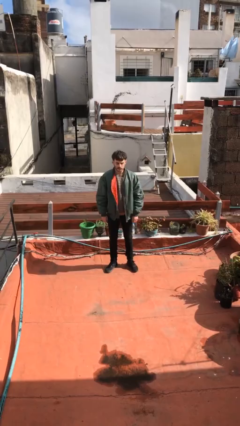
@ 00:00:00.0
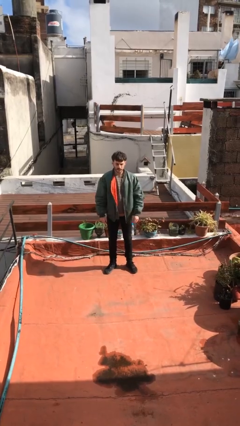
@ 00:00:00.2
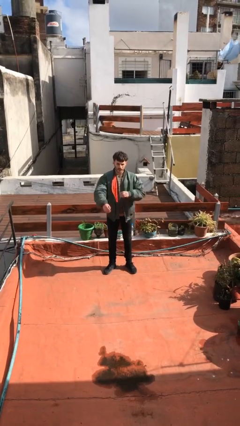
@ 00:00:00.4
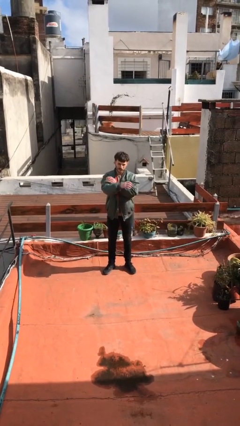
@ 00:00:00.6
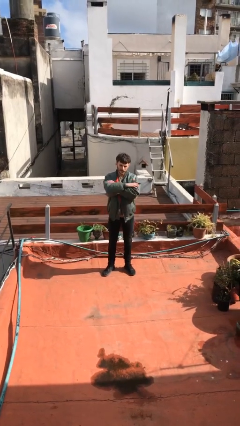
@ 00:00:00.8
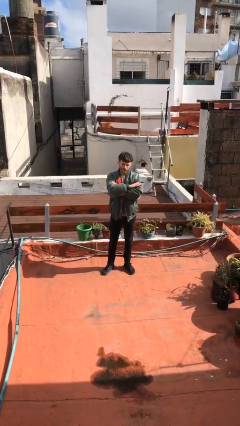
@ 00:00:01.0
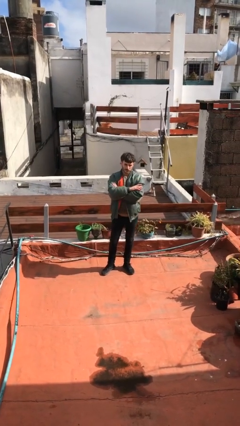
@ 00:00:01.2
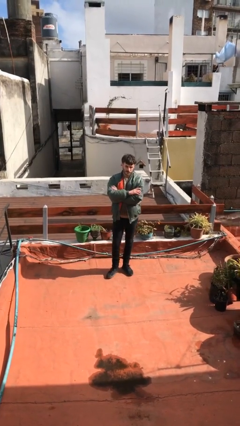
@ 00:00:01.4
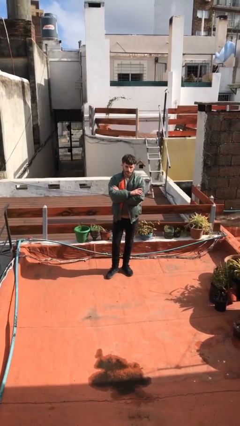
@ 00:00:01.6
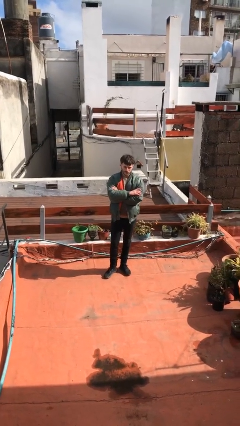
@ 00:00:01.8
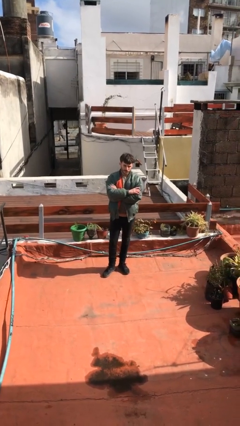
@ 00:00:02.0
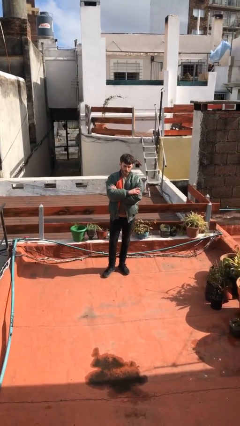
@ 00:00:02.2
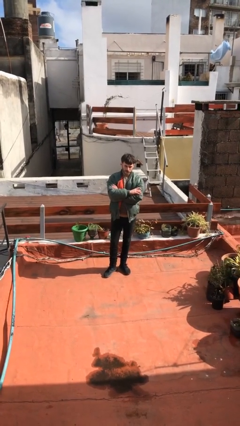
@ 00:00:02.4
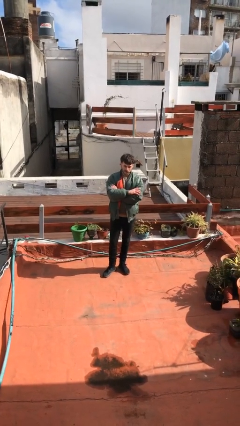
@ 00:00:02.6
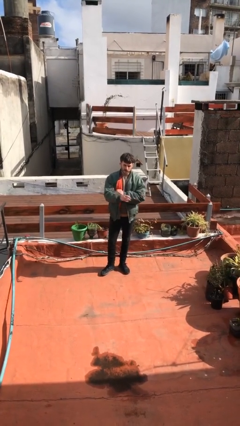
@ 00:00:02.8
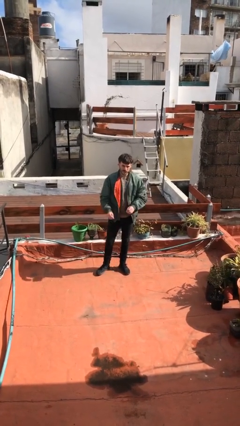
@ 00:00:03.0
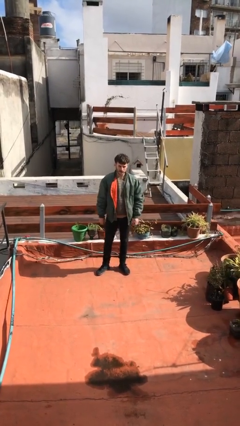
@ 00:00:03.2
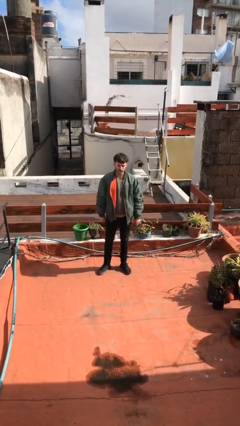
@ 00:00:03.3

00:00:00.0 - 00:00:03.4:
person crosses arms

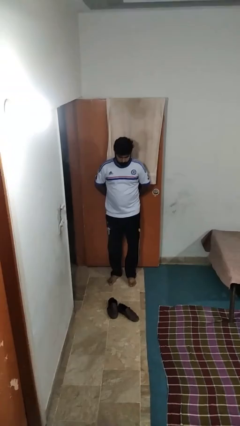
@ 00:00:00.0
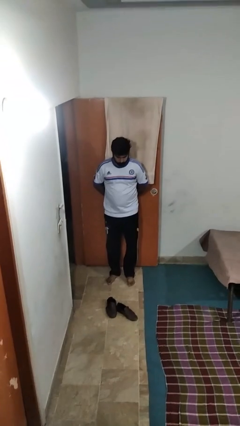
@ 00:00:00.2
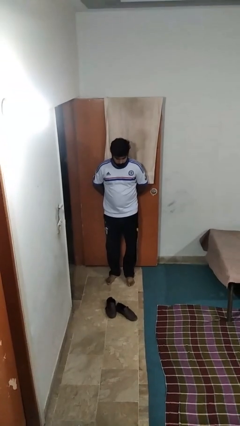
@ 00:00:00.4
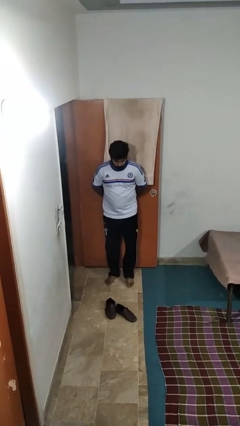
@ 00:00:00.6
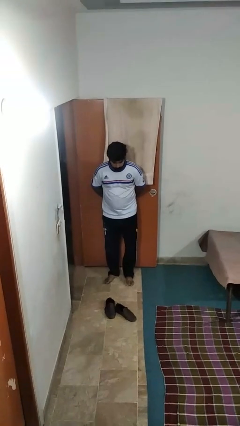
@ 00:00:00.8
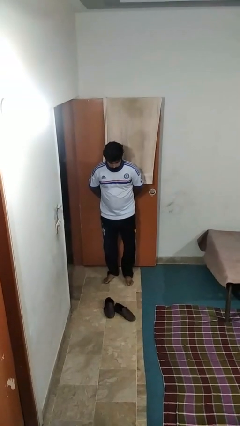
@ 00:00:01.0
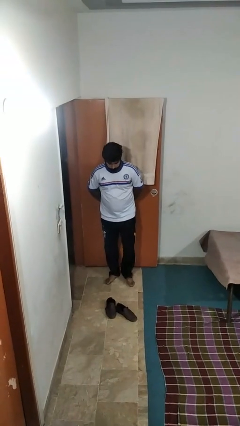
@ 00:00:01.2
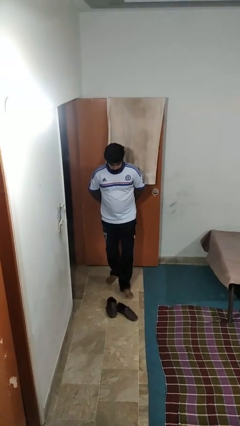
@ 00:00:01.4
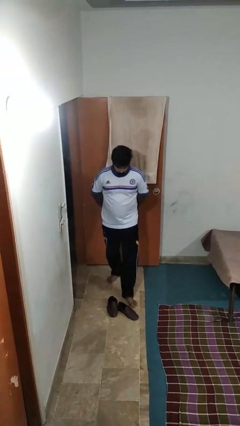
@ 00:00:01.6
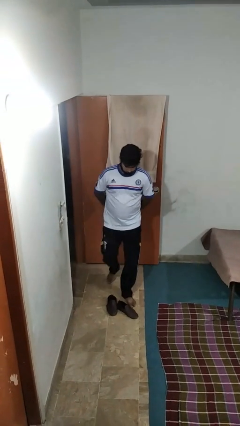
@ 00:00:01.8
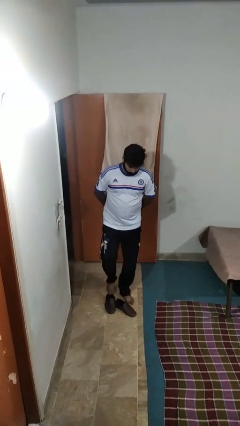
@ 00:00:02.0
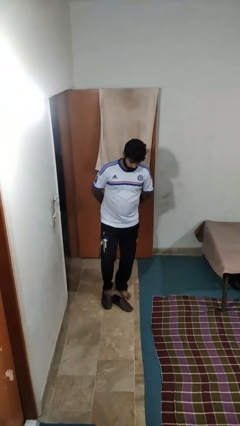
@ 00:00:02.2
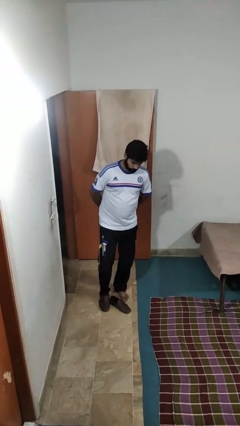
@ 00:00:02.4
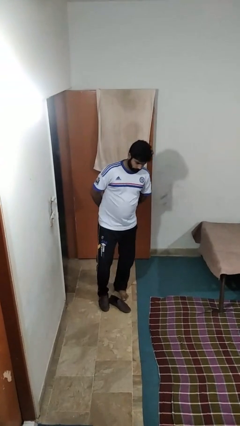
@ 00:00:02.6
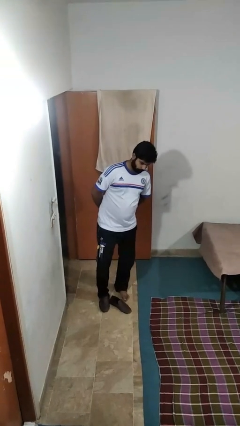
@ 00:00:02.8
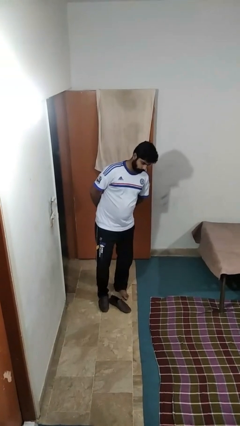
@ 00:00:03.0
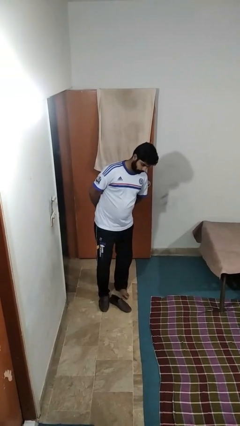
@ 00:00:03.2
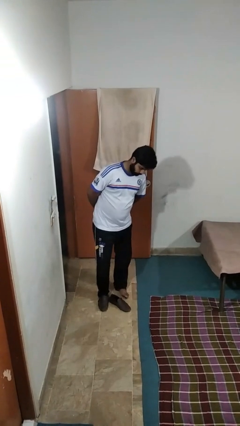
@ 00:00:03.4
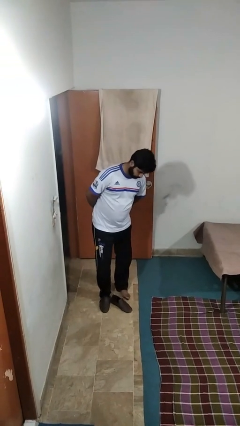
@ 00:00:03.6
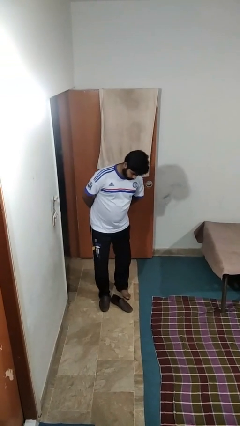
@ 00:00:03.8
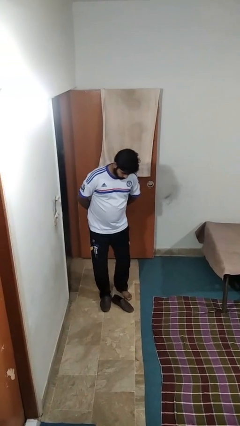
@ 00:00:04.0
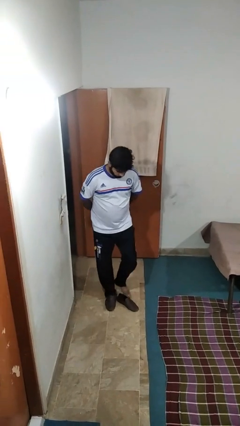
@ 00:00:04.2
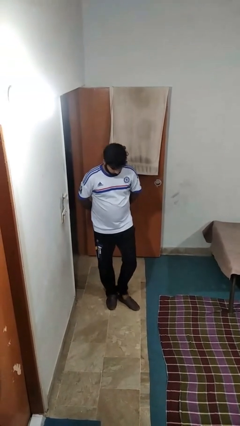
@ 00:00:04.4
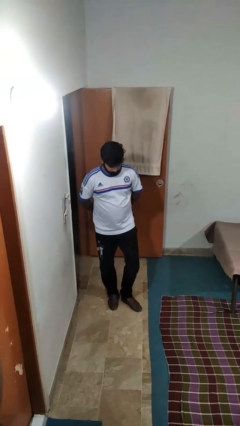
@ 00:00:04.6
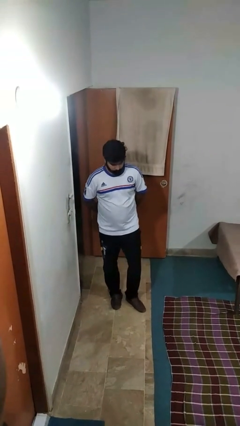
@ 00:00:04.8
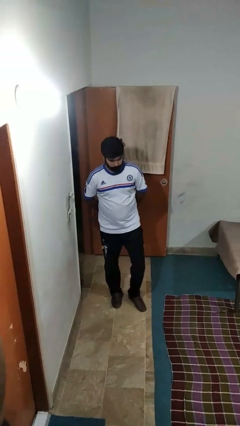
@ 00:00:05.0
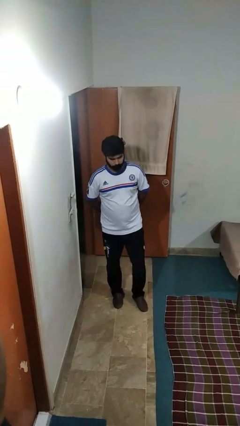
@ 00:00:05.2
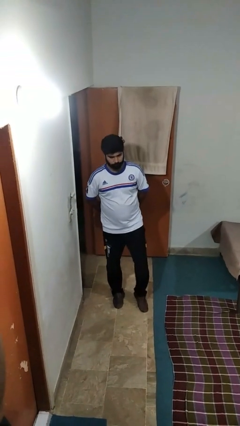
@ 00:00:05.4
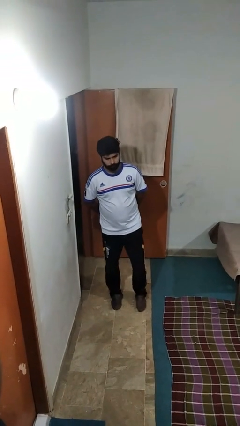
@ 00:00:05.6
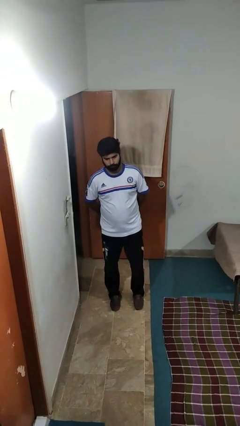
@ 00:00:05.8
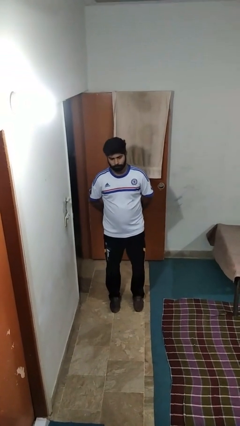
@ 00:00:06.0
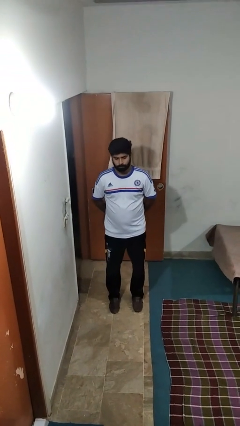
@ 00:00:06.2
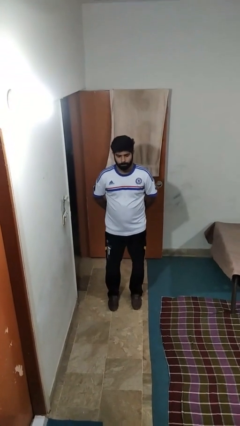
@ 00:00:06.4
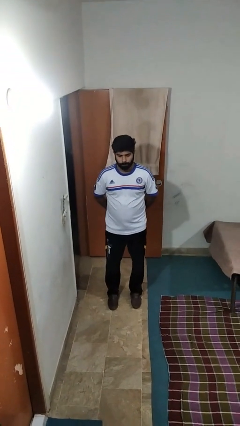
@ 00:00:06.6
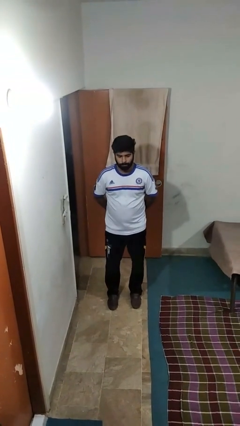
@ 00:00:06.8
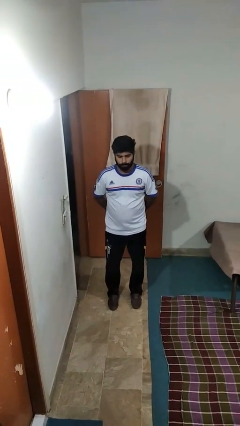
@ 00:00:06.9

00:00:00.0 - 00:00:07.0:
person puts on shoes

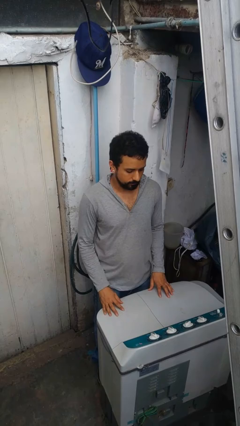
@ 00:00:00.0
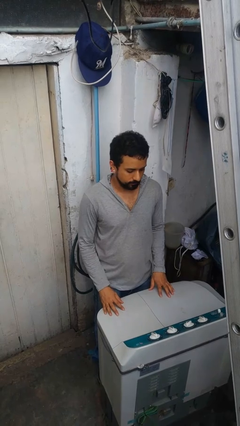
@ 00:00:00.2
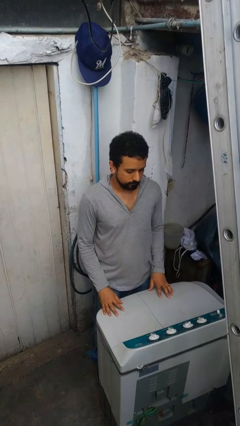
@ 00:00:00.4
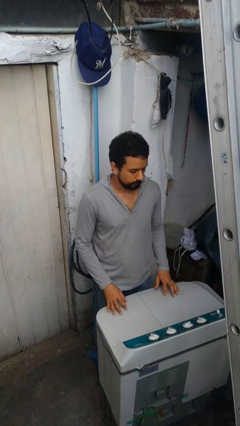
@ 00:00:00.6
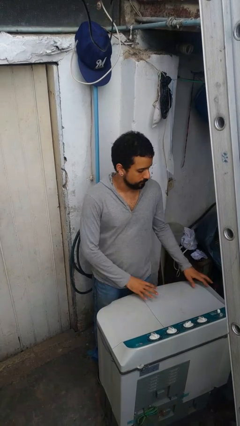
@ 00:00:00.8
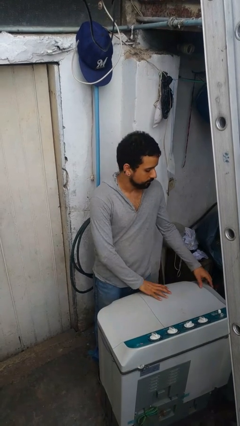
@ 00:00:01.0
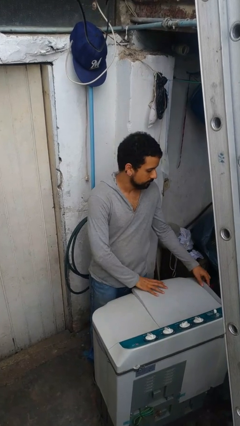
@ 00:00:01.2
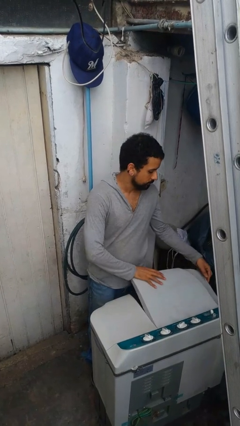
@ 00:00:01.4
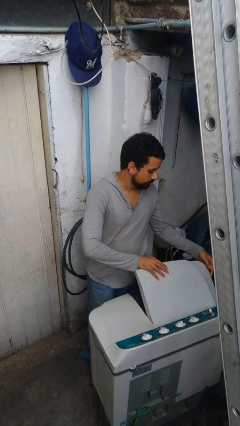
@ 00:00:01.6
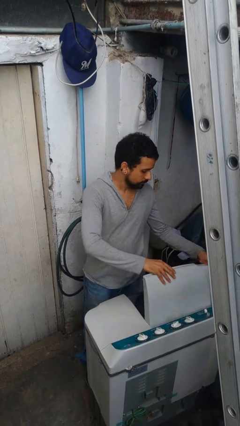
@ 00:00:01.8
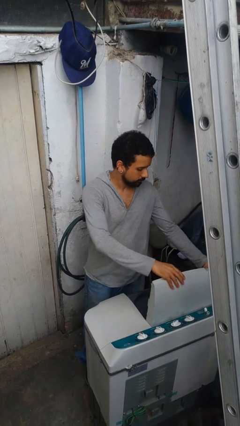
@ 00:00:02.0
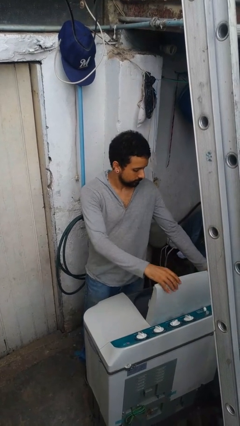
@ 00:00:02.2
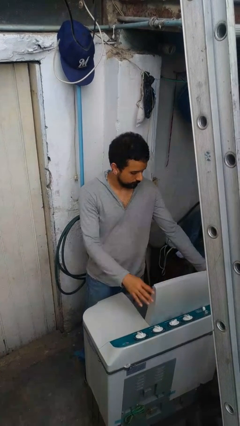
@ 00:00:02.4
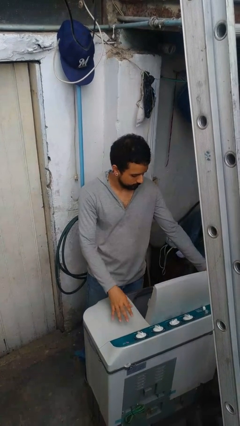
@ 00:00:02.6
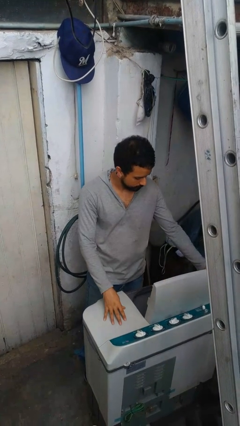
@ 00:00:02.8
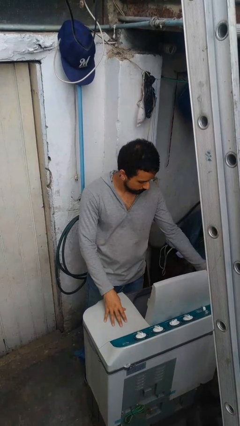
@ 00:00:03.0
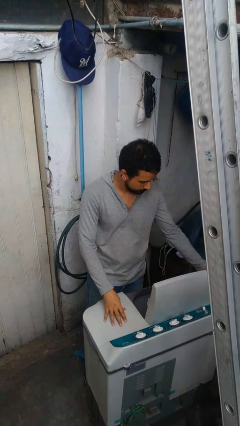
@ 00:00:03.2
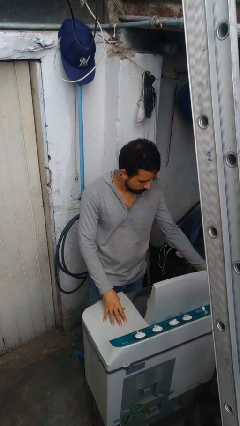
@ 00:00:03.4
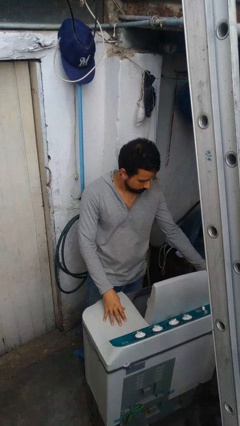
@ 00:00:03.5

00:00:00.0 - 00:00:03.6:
person opens clothes washer

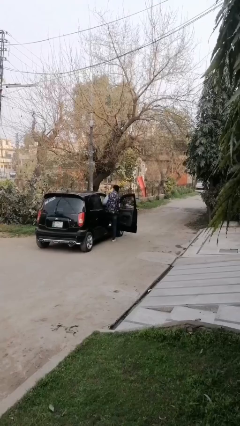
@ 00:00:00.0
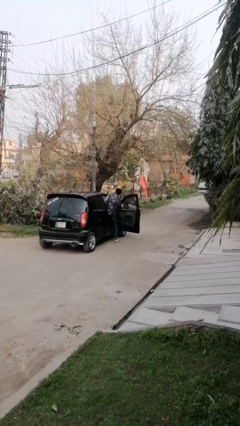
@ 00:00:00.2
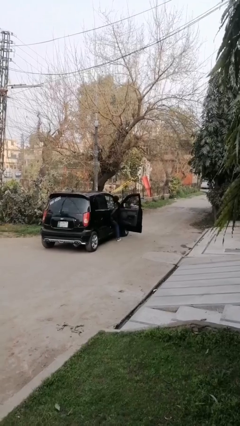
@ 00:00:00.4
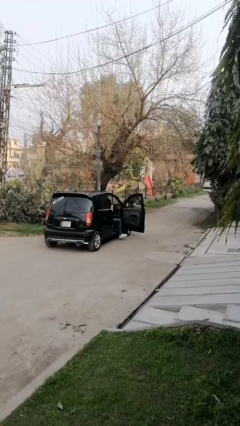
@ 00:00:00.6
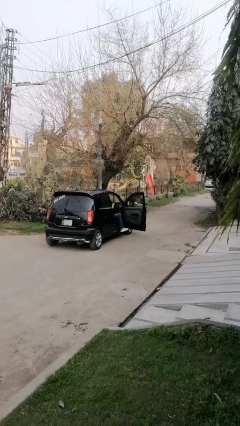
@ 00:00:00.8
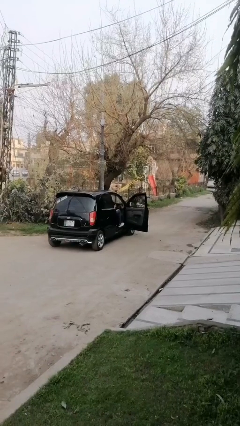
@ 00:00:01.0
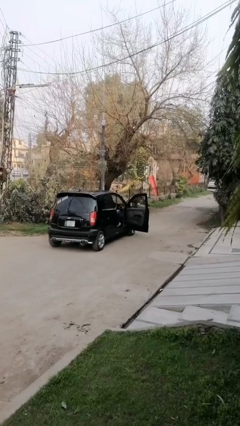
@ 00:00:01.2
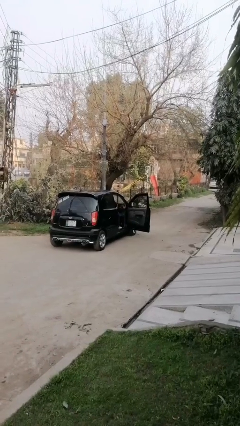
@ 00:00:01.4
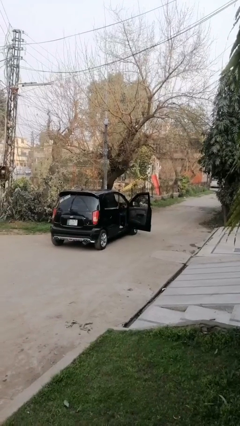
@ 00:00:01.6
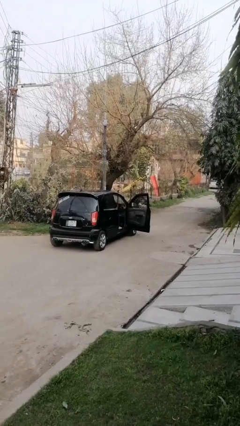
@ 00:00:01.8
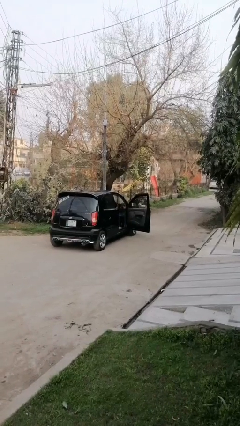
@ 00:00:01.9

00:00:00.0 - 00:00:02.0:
person exits car

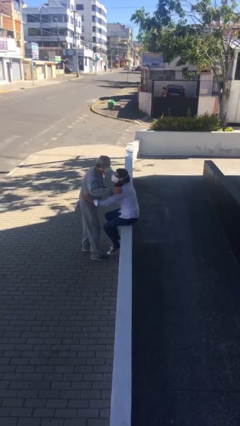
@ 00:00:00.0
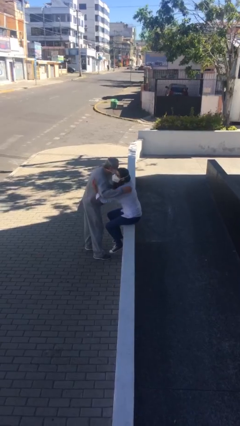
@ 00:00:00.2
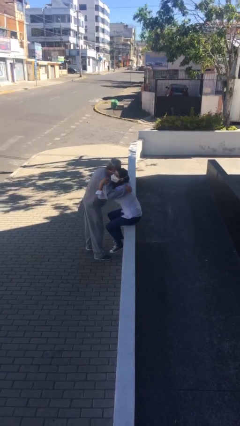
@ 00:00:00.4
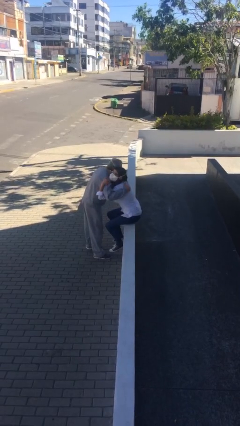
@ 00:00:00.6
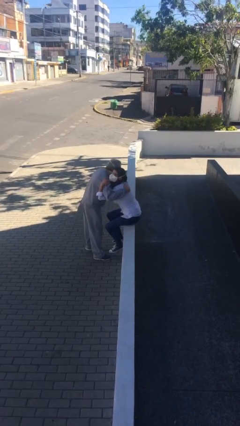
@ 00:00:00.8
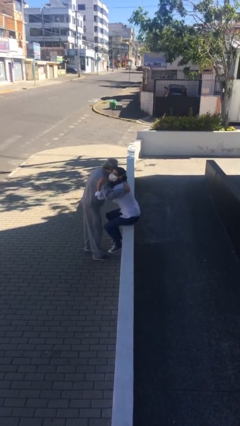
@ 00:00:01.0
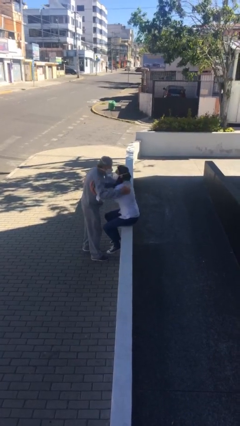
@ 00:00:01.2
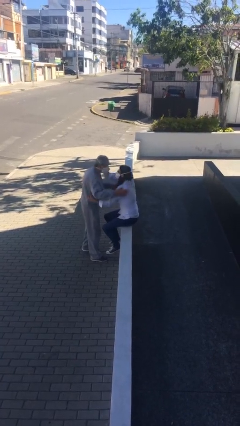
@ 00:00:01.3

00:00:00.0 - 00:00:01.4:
person embraces person
